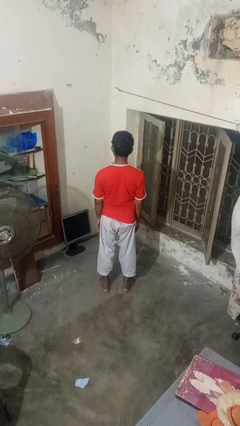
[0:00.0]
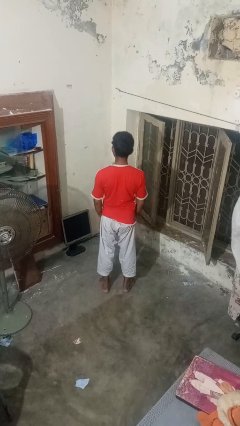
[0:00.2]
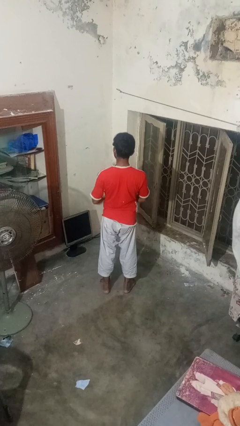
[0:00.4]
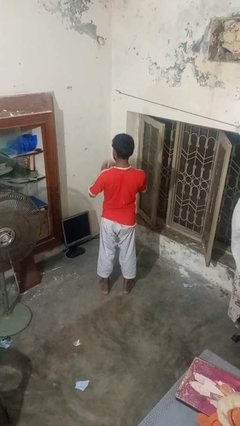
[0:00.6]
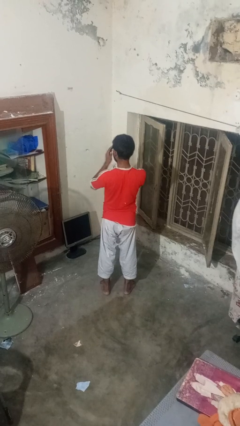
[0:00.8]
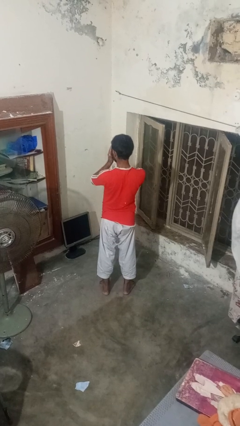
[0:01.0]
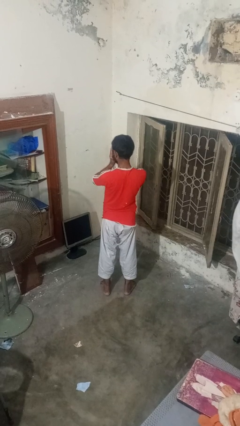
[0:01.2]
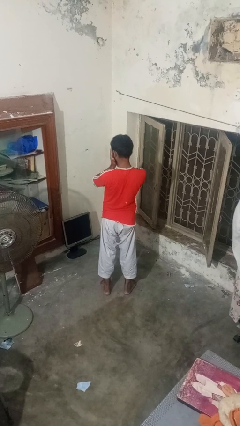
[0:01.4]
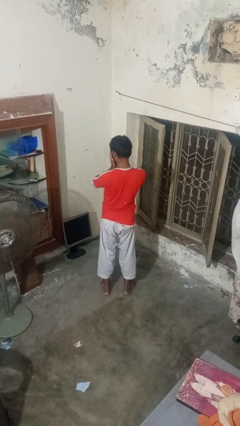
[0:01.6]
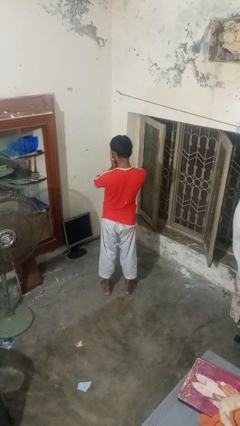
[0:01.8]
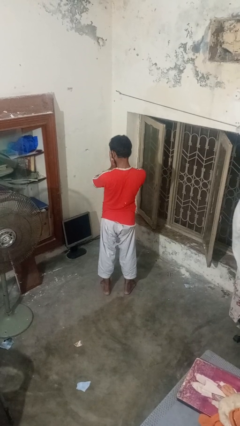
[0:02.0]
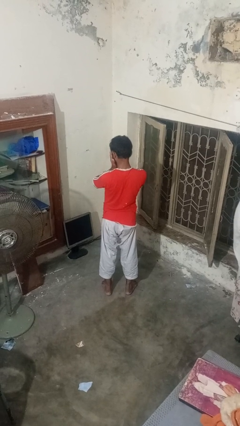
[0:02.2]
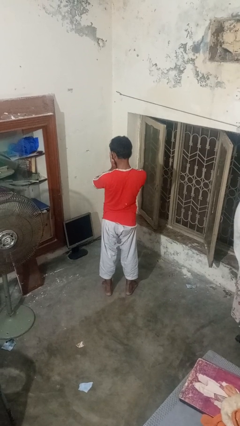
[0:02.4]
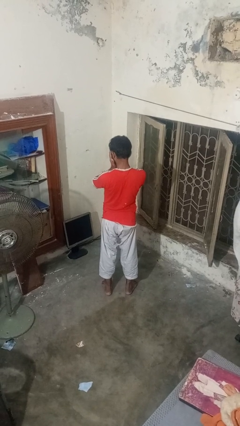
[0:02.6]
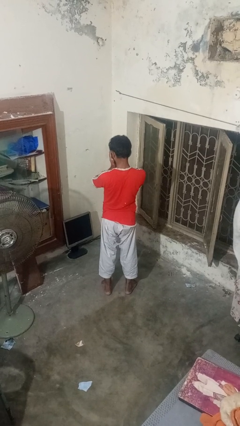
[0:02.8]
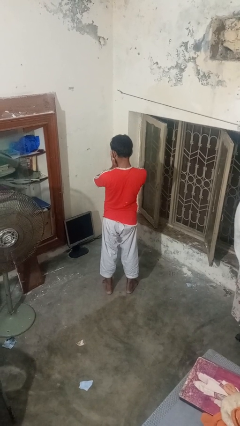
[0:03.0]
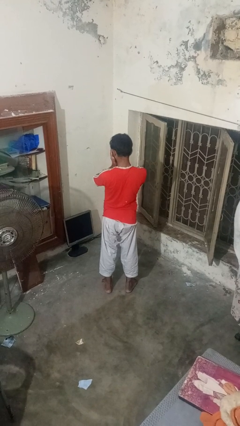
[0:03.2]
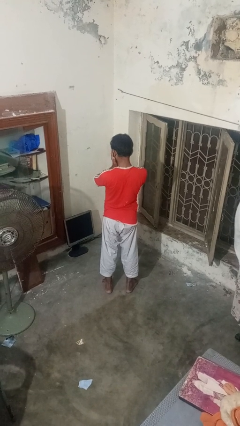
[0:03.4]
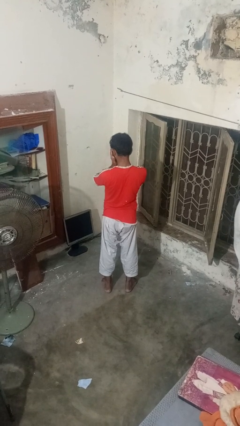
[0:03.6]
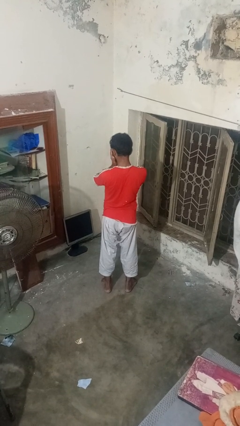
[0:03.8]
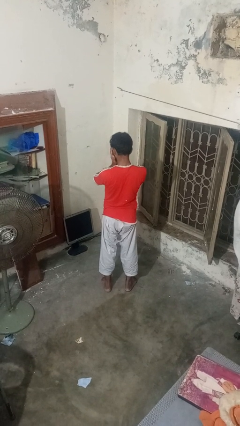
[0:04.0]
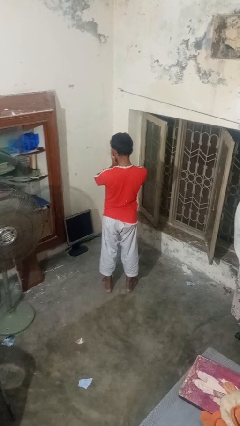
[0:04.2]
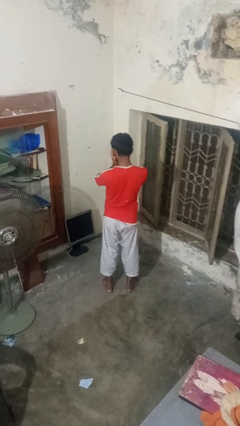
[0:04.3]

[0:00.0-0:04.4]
person covers face with hands

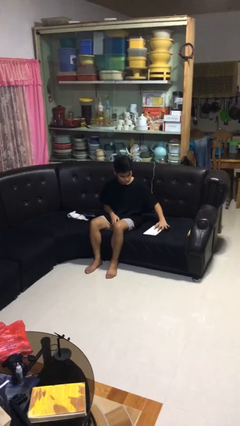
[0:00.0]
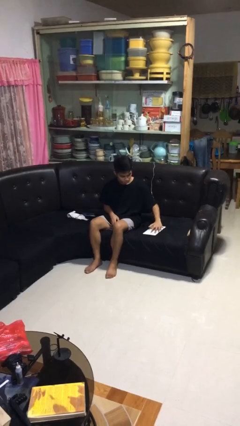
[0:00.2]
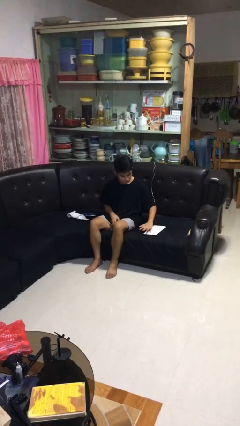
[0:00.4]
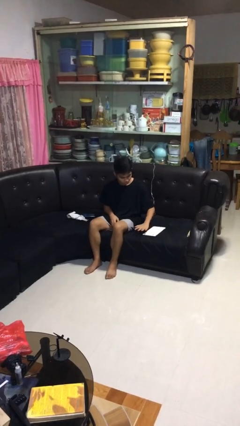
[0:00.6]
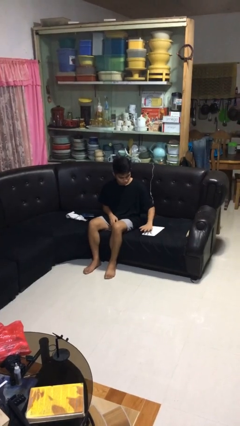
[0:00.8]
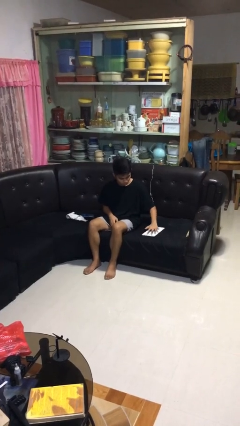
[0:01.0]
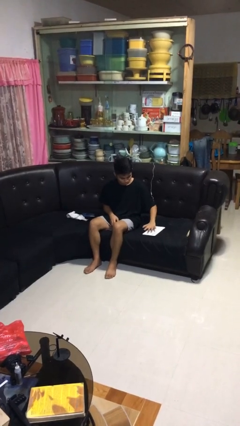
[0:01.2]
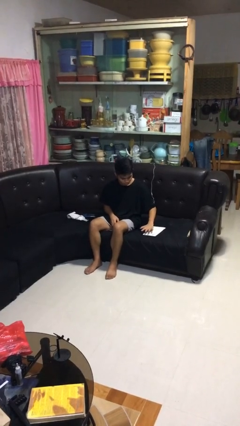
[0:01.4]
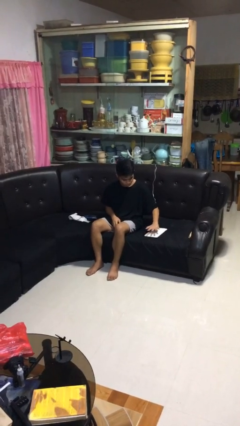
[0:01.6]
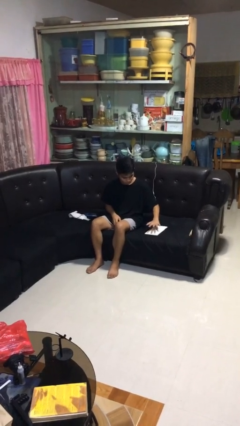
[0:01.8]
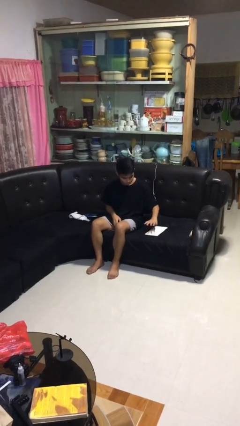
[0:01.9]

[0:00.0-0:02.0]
person waves hand over object

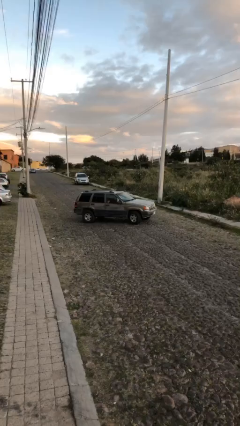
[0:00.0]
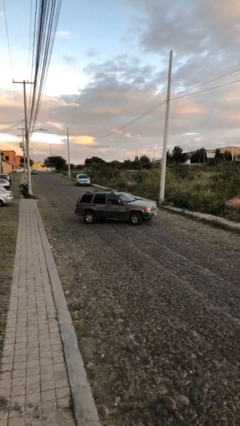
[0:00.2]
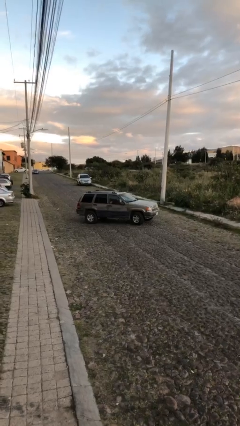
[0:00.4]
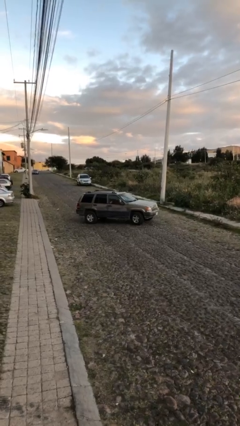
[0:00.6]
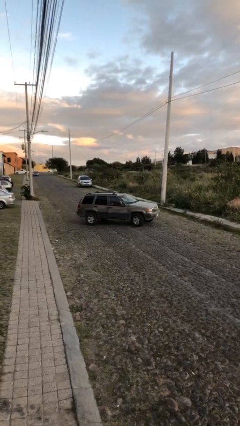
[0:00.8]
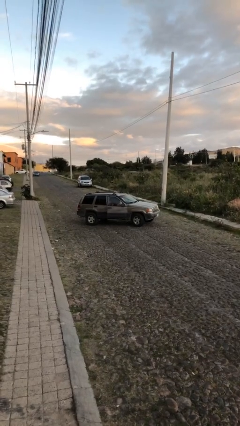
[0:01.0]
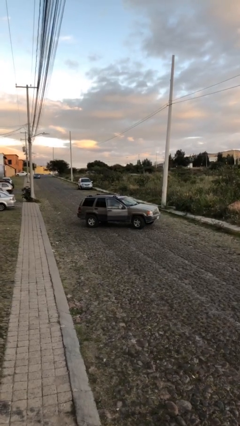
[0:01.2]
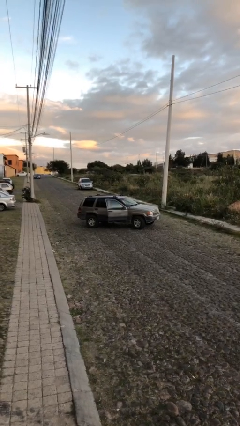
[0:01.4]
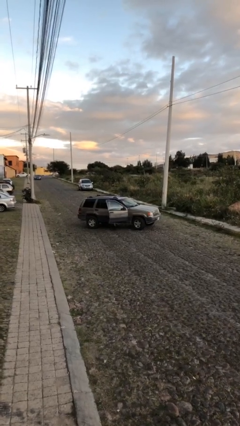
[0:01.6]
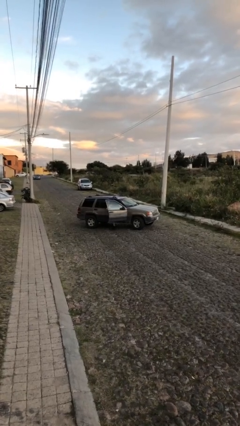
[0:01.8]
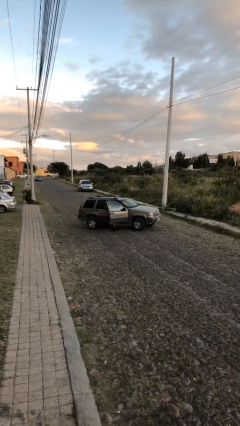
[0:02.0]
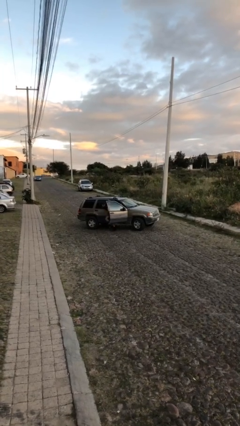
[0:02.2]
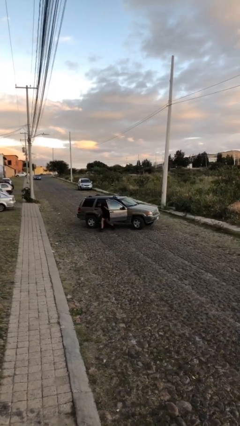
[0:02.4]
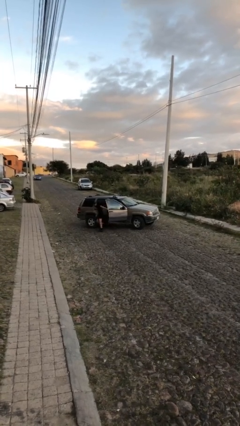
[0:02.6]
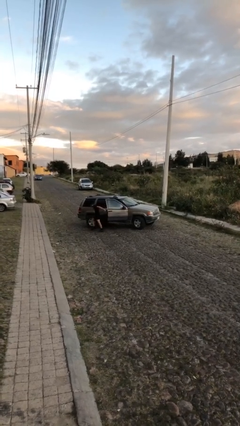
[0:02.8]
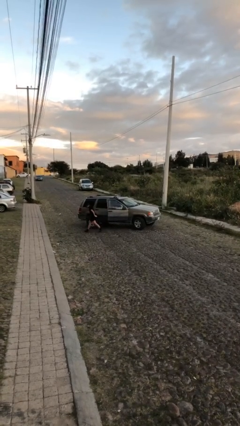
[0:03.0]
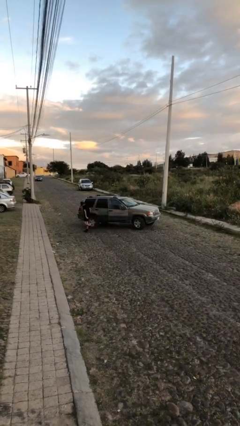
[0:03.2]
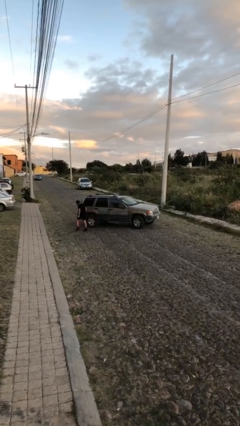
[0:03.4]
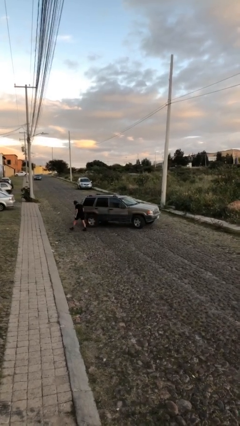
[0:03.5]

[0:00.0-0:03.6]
car drops off person

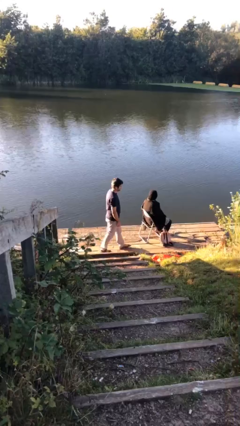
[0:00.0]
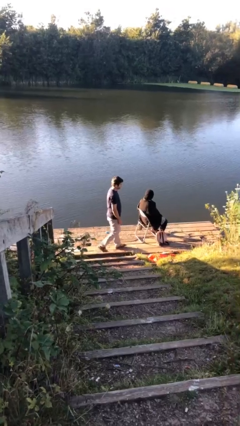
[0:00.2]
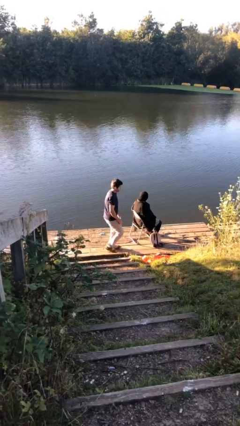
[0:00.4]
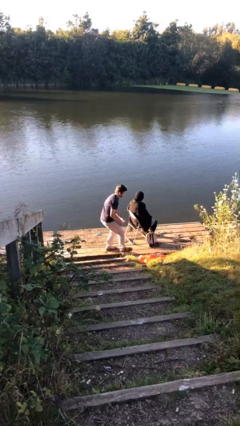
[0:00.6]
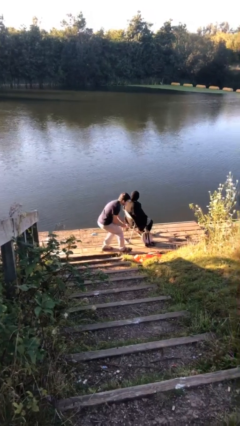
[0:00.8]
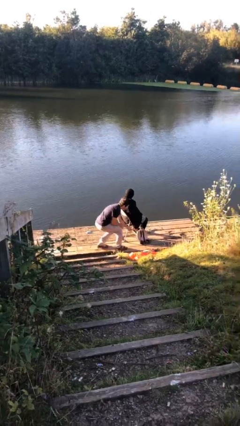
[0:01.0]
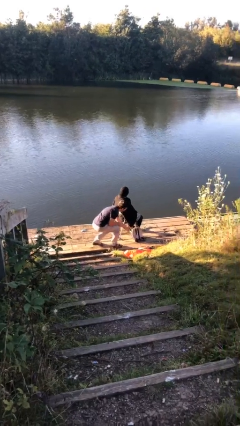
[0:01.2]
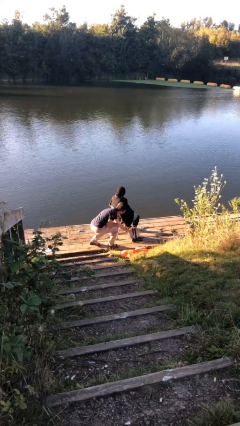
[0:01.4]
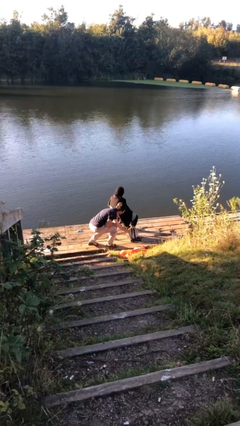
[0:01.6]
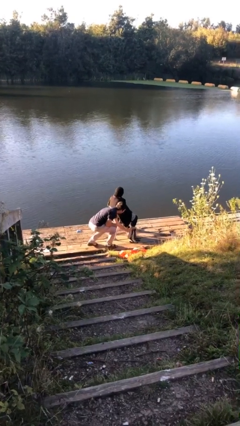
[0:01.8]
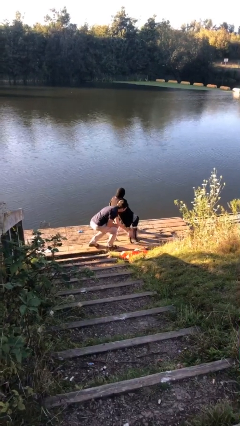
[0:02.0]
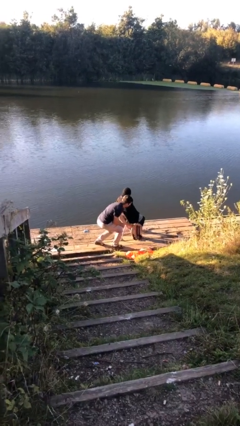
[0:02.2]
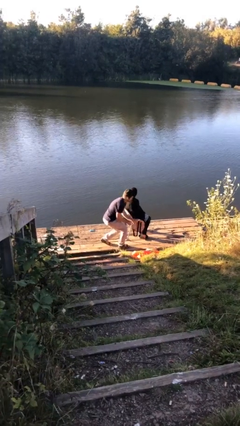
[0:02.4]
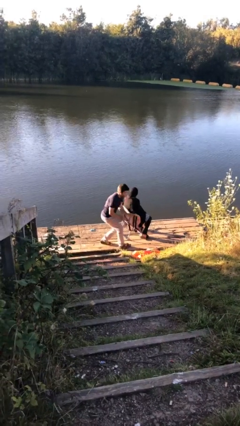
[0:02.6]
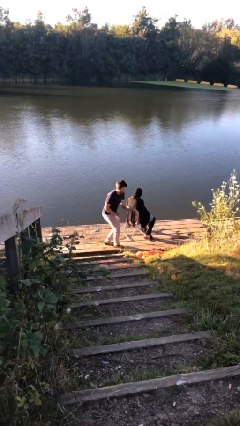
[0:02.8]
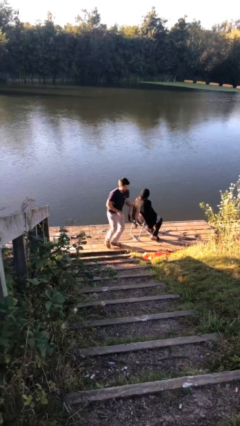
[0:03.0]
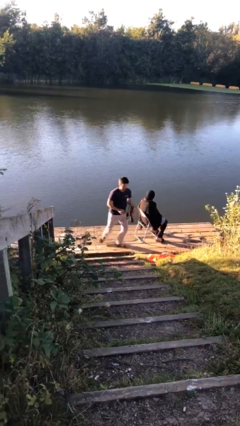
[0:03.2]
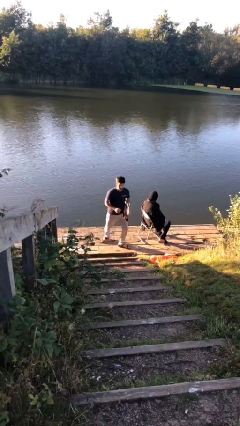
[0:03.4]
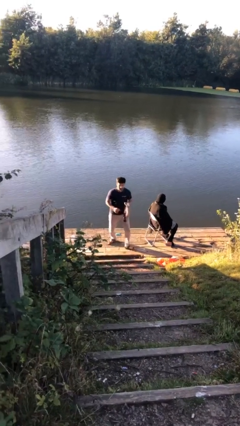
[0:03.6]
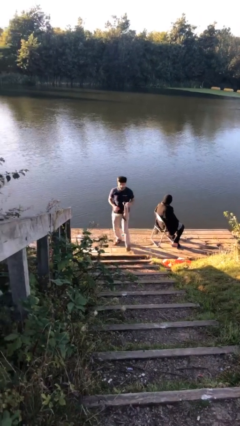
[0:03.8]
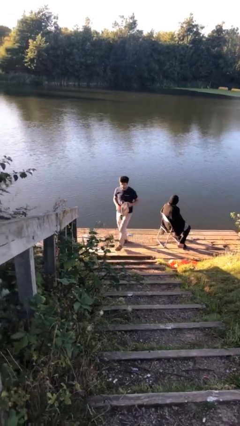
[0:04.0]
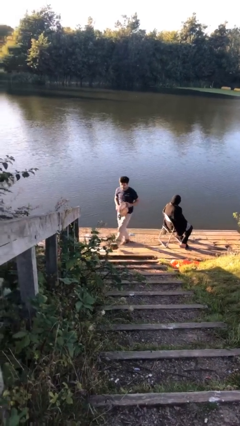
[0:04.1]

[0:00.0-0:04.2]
person steals object from person

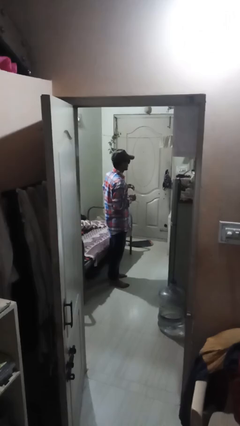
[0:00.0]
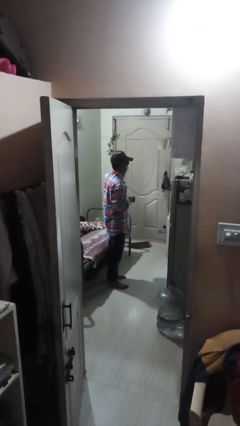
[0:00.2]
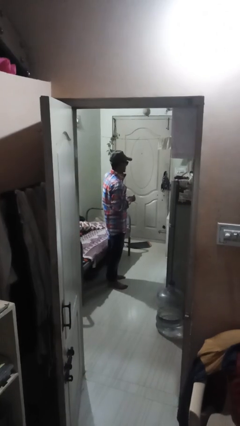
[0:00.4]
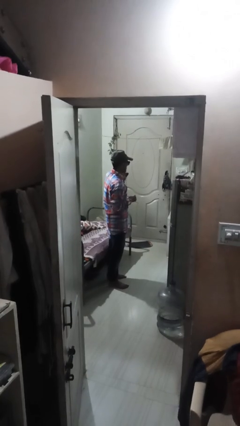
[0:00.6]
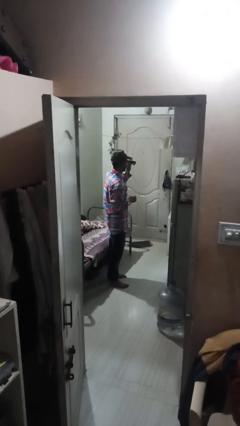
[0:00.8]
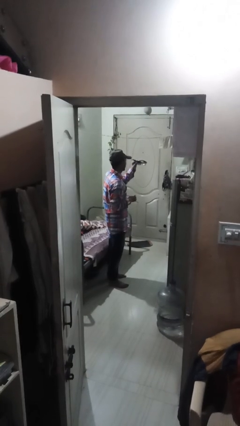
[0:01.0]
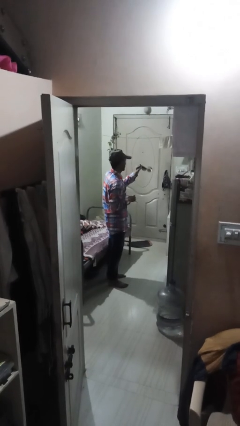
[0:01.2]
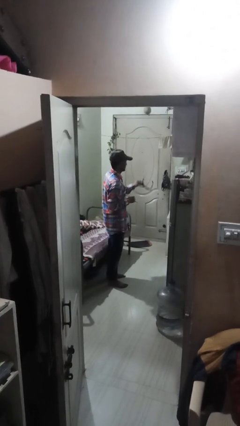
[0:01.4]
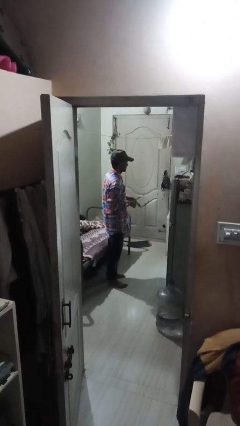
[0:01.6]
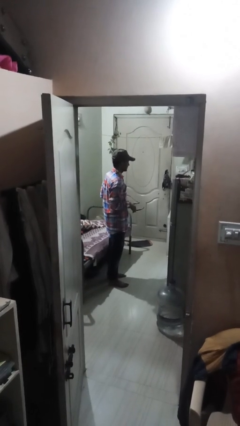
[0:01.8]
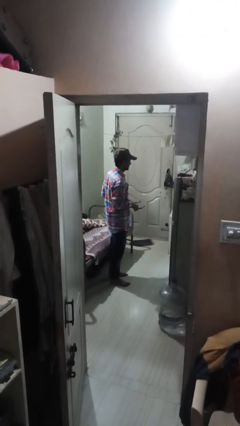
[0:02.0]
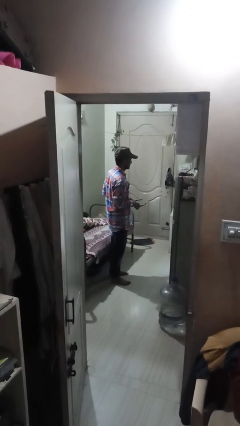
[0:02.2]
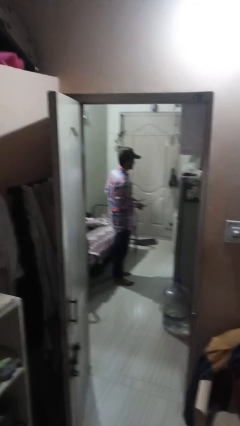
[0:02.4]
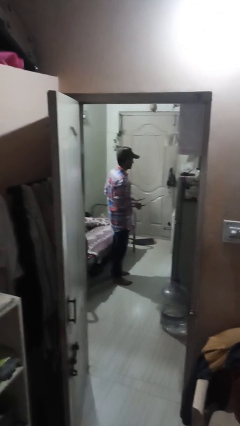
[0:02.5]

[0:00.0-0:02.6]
person takes off sunglasses

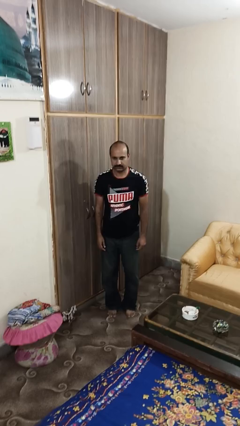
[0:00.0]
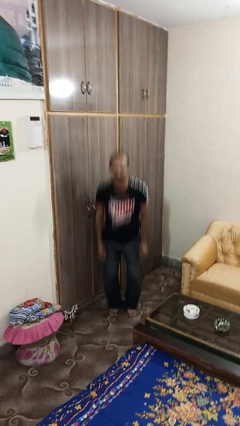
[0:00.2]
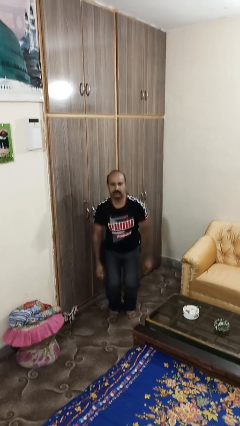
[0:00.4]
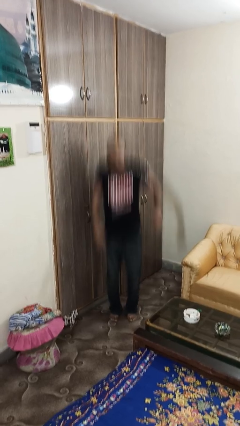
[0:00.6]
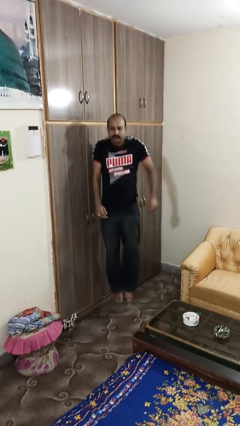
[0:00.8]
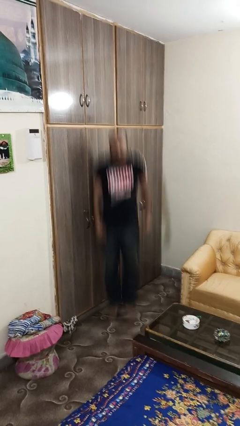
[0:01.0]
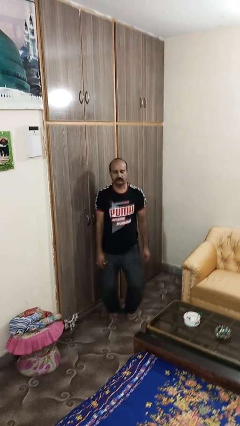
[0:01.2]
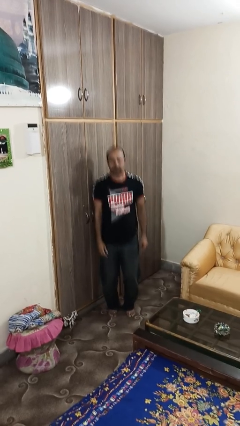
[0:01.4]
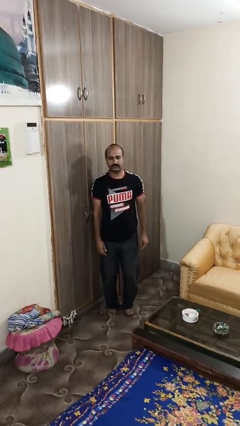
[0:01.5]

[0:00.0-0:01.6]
person jumps
